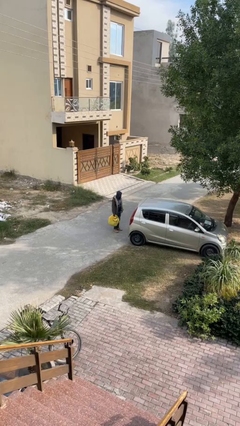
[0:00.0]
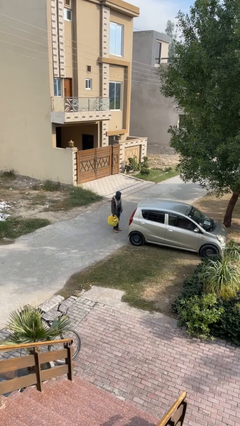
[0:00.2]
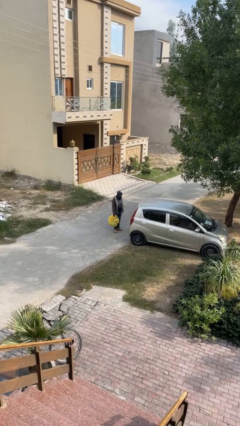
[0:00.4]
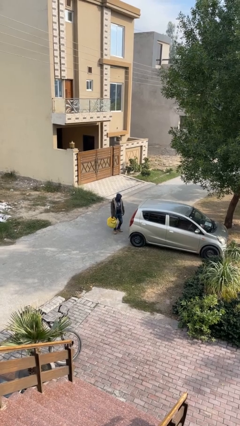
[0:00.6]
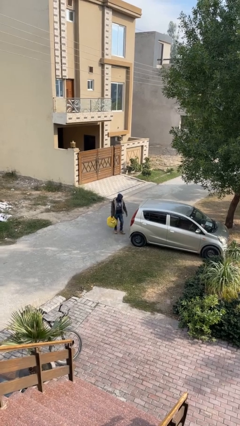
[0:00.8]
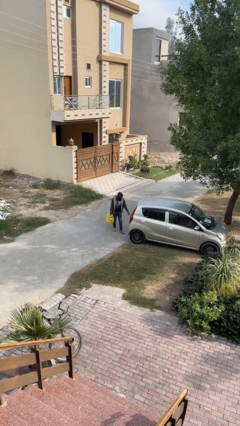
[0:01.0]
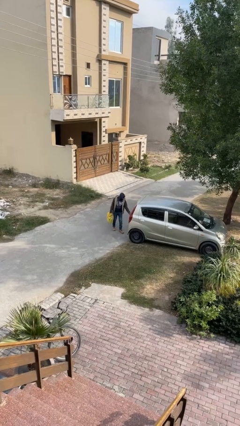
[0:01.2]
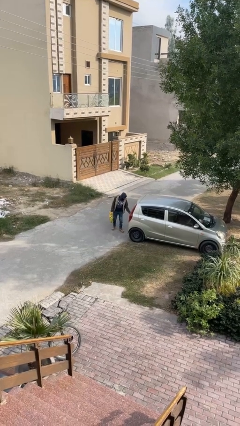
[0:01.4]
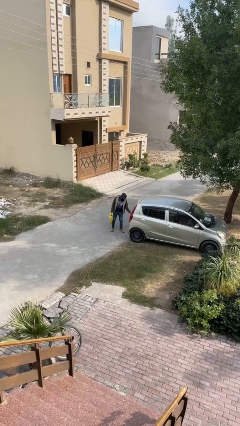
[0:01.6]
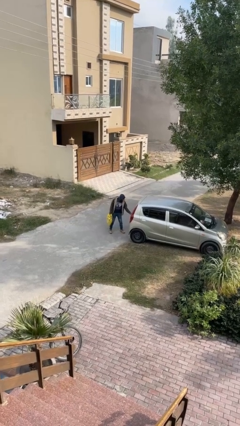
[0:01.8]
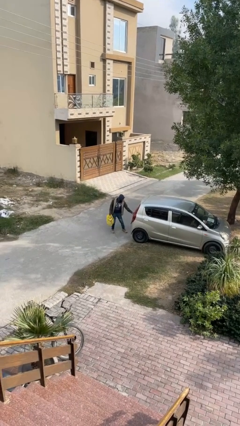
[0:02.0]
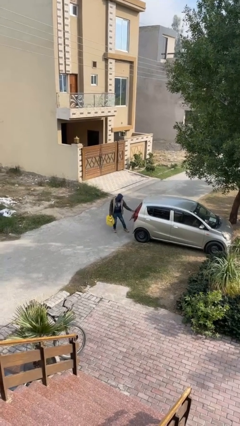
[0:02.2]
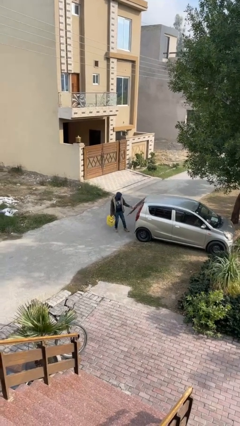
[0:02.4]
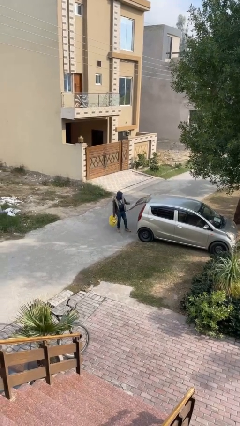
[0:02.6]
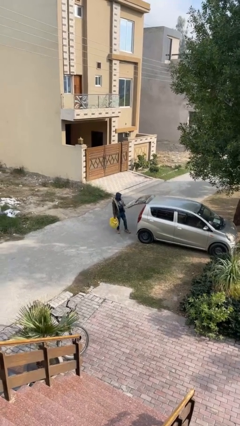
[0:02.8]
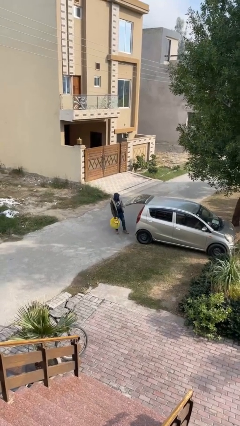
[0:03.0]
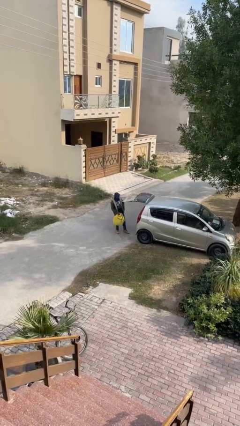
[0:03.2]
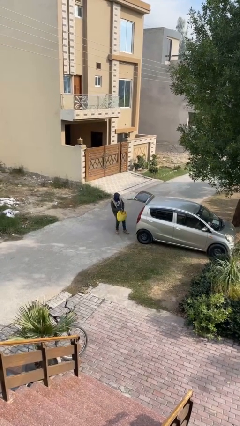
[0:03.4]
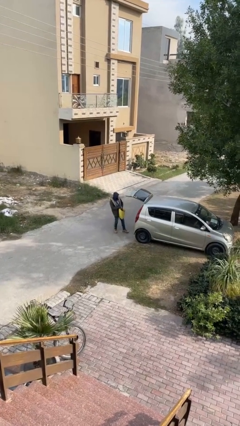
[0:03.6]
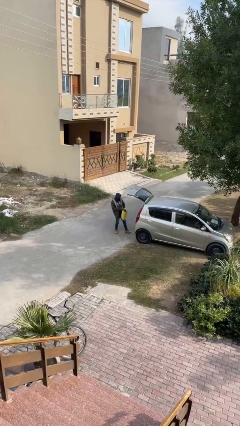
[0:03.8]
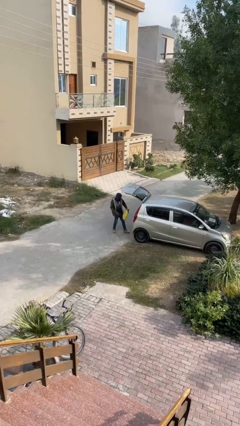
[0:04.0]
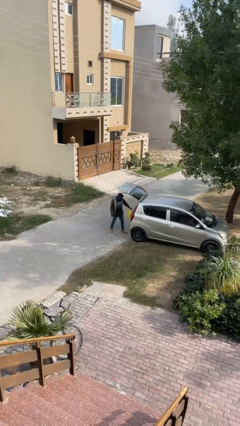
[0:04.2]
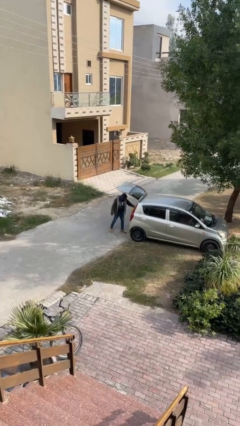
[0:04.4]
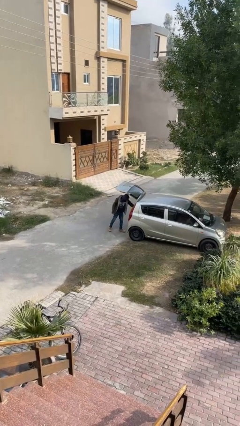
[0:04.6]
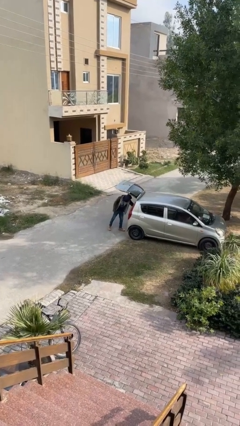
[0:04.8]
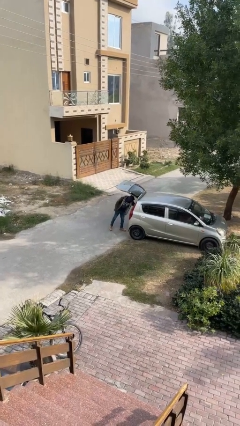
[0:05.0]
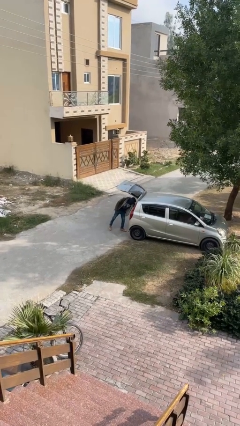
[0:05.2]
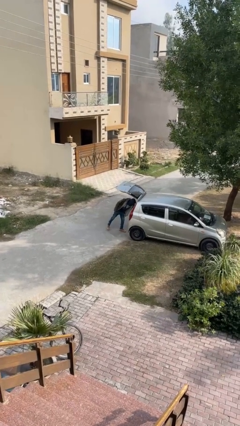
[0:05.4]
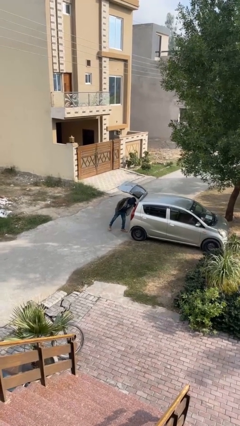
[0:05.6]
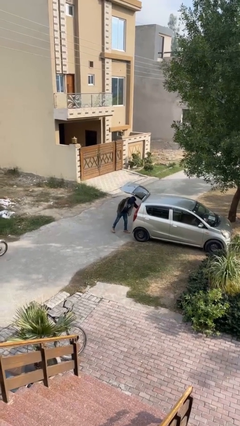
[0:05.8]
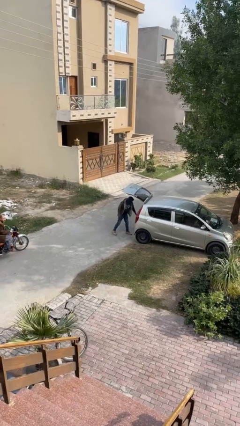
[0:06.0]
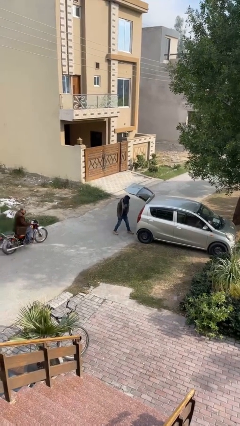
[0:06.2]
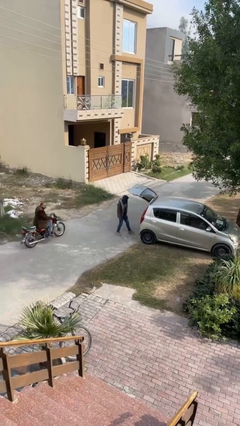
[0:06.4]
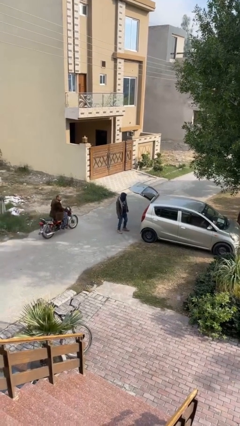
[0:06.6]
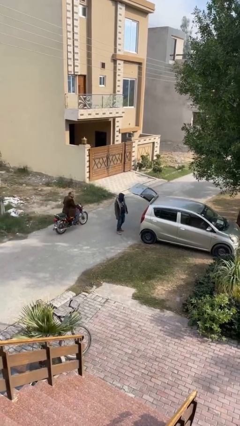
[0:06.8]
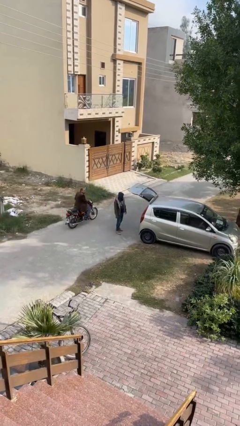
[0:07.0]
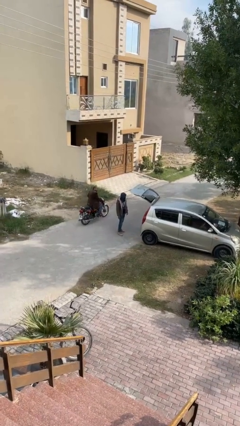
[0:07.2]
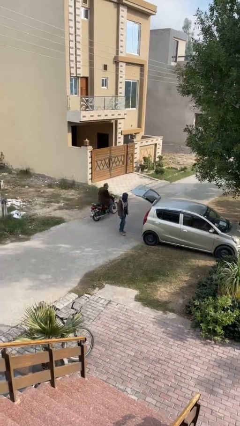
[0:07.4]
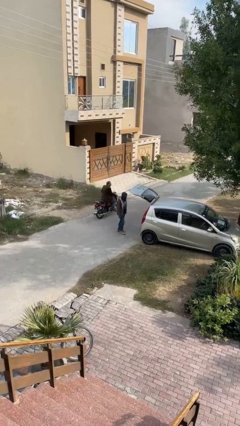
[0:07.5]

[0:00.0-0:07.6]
person loads car

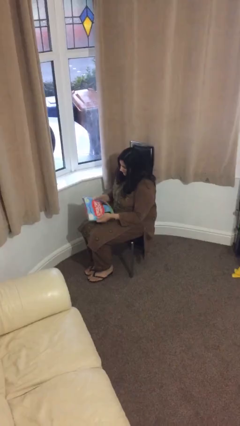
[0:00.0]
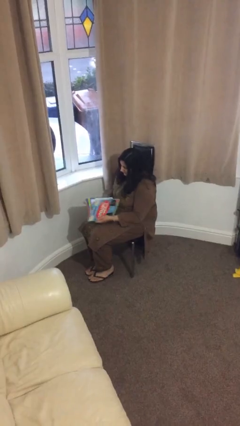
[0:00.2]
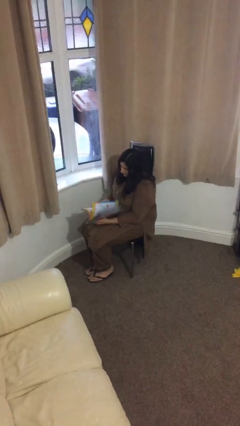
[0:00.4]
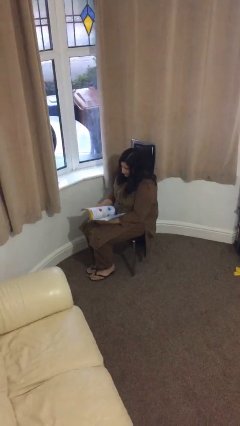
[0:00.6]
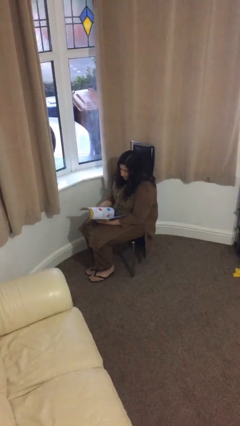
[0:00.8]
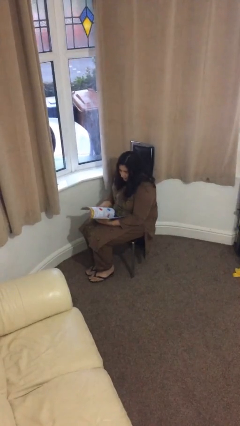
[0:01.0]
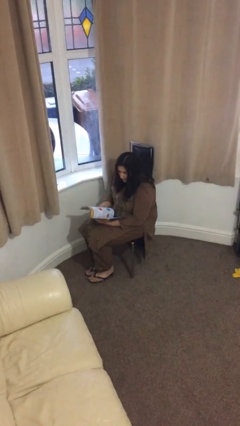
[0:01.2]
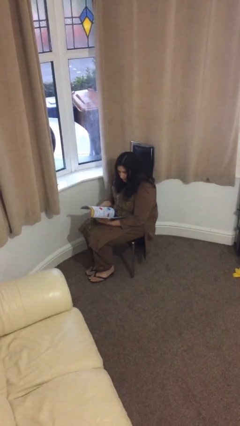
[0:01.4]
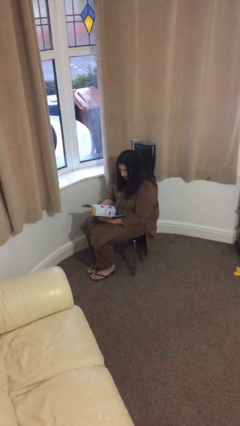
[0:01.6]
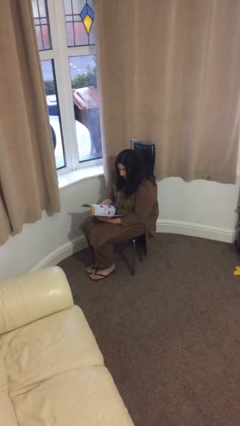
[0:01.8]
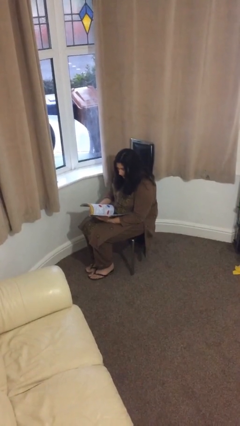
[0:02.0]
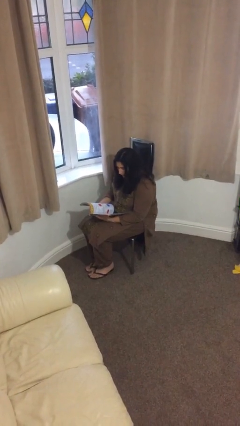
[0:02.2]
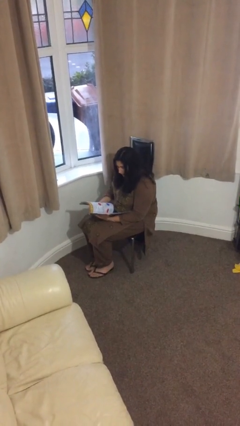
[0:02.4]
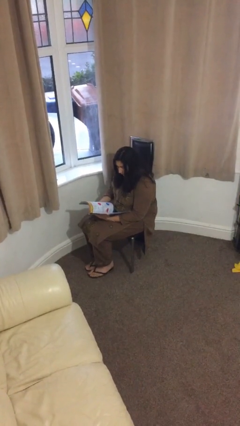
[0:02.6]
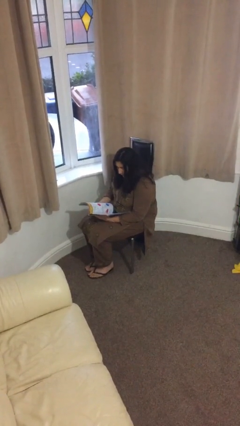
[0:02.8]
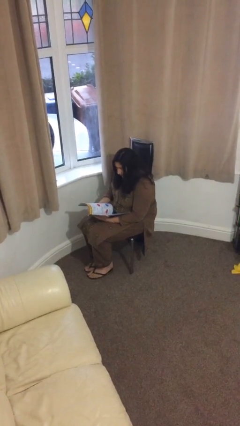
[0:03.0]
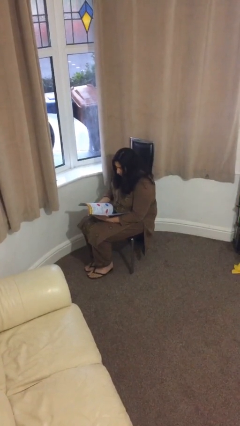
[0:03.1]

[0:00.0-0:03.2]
person reads document

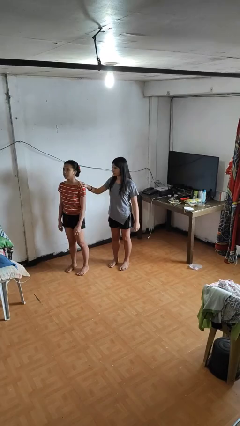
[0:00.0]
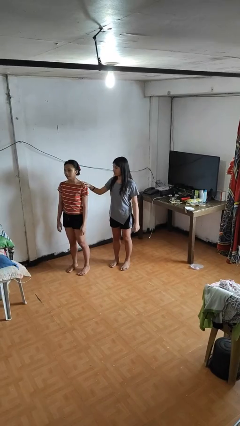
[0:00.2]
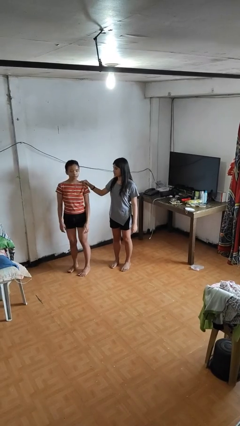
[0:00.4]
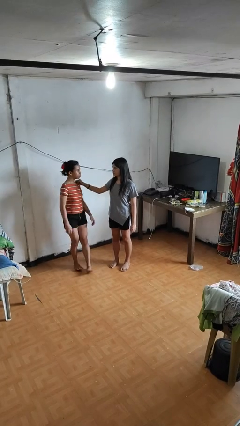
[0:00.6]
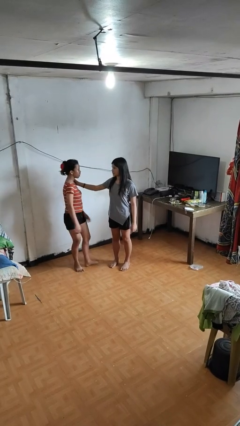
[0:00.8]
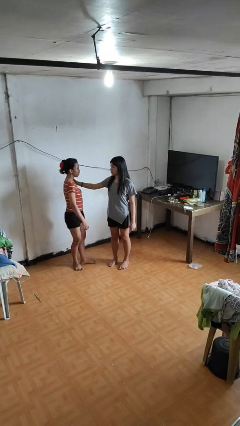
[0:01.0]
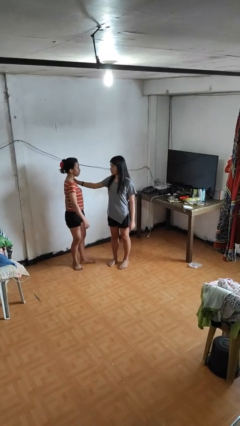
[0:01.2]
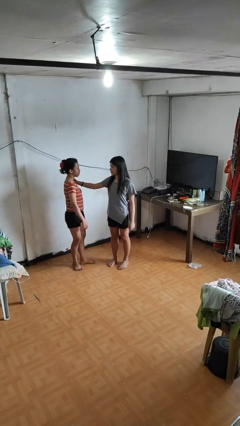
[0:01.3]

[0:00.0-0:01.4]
person spins person around

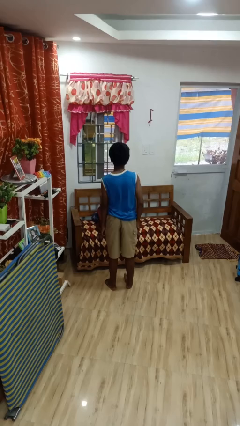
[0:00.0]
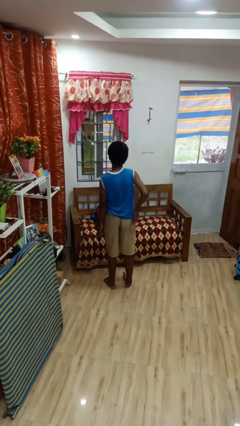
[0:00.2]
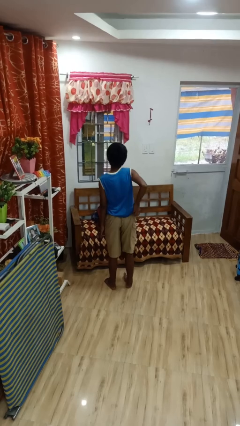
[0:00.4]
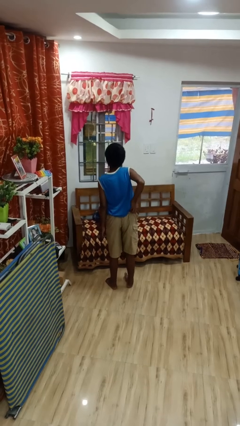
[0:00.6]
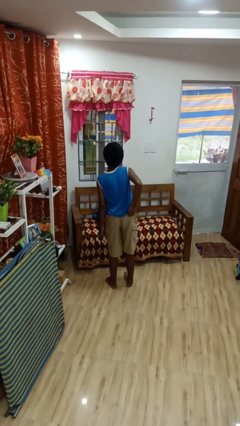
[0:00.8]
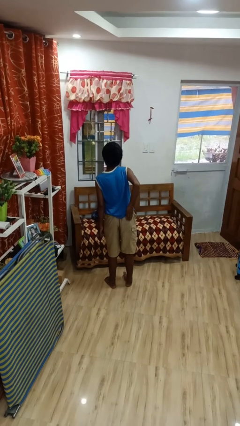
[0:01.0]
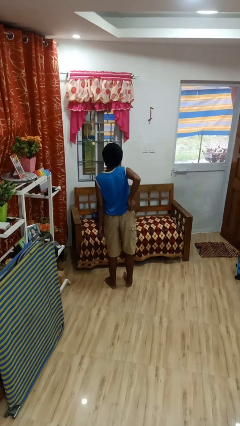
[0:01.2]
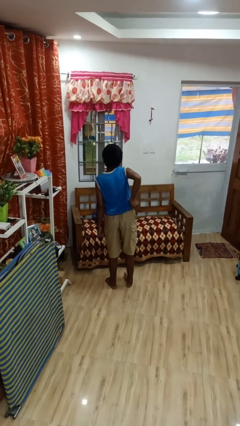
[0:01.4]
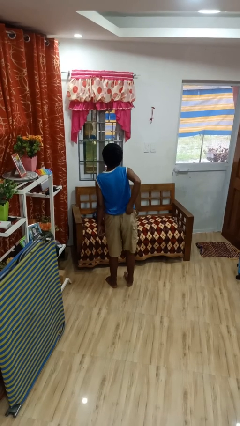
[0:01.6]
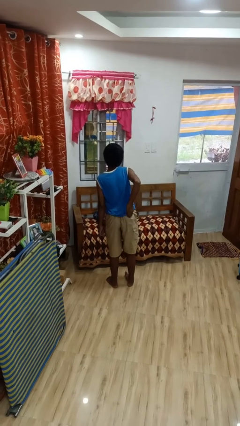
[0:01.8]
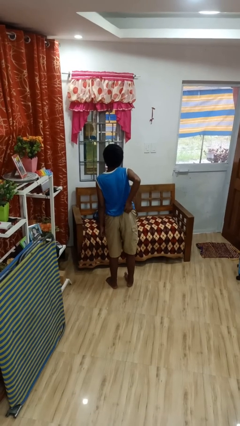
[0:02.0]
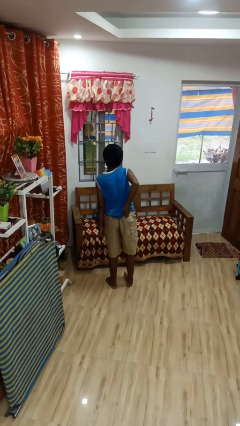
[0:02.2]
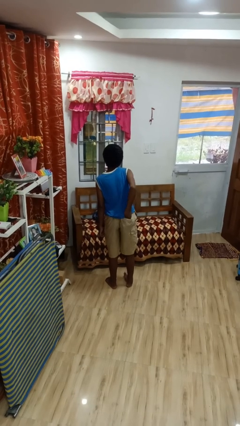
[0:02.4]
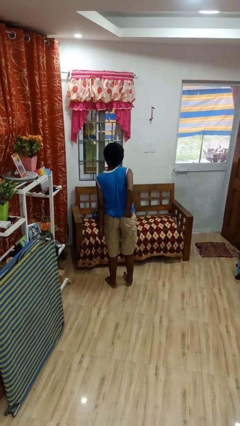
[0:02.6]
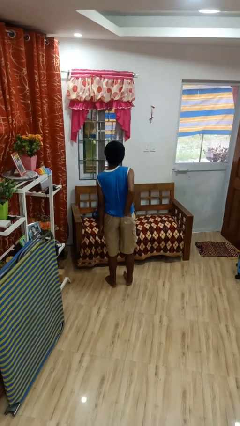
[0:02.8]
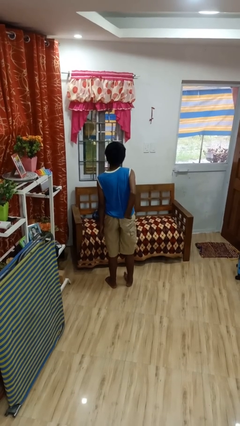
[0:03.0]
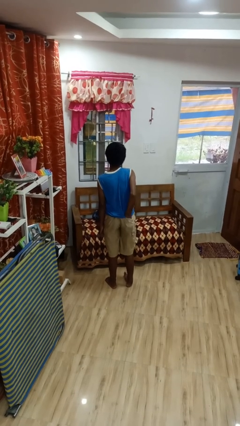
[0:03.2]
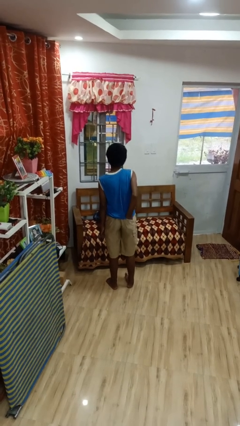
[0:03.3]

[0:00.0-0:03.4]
person puts hands in back pockets

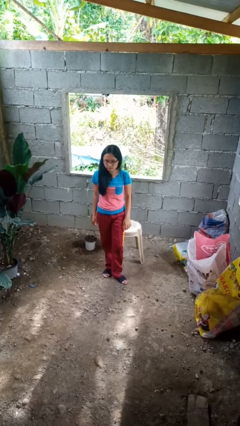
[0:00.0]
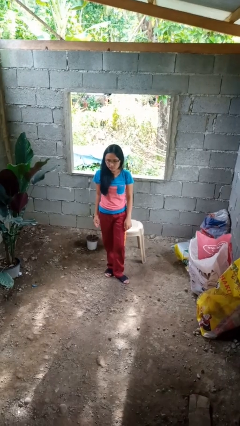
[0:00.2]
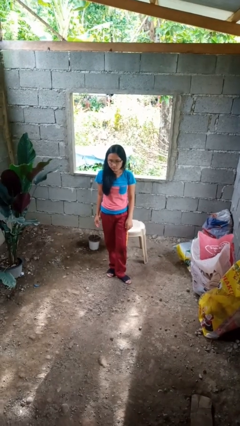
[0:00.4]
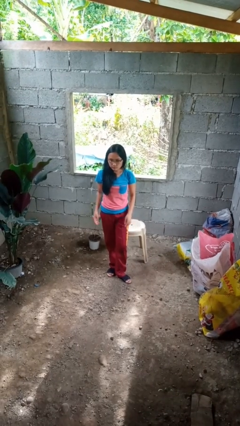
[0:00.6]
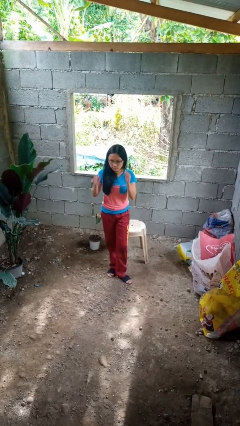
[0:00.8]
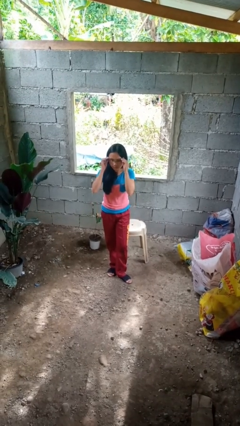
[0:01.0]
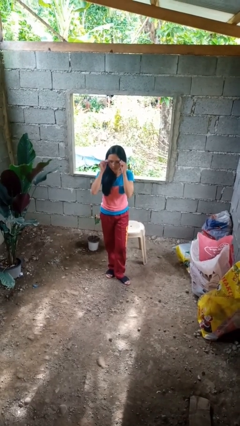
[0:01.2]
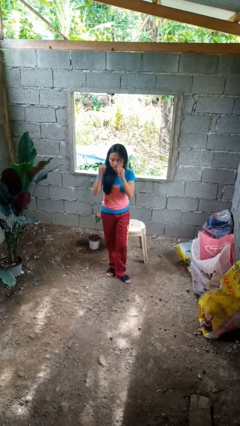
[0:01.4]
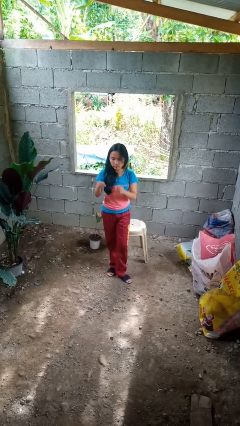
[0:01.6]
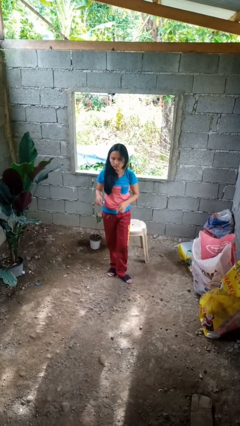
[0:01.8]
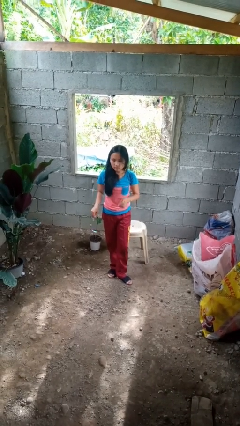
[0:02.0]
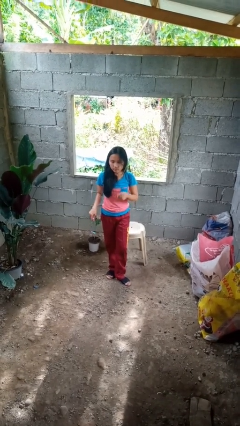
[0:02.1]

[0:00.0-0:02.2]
person takes off glasses
